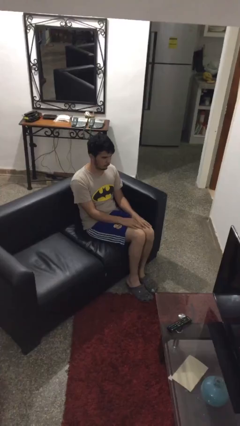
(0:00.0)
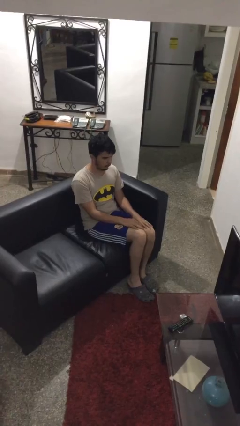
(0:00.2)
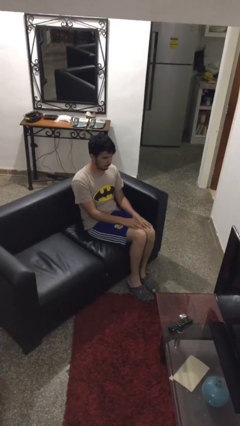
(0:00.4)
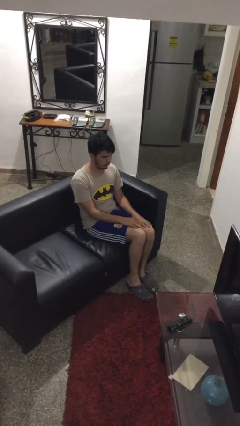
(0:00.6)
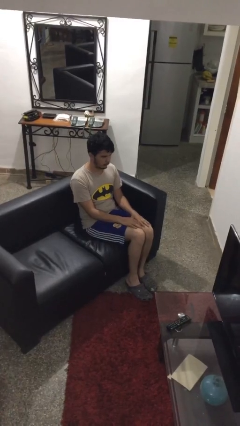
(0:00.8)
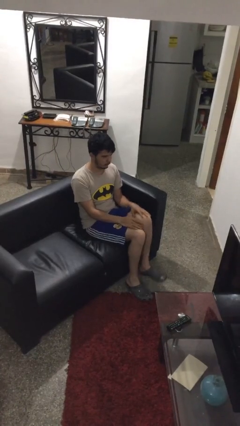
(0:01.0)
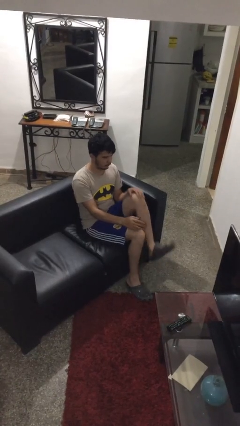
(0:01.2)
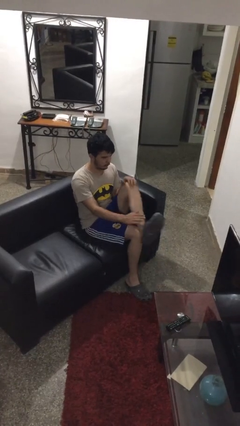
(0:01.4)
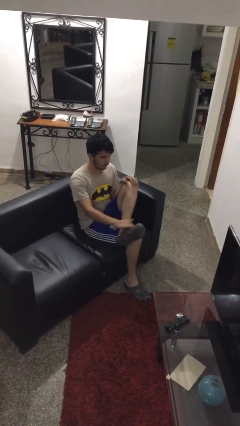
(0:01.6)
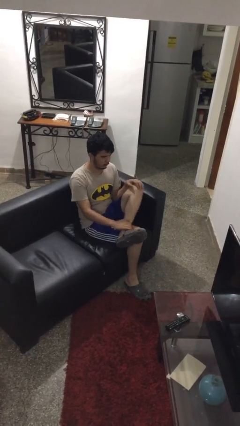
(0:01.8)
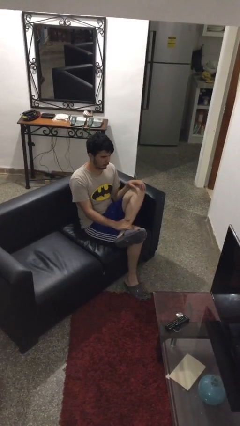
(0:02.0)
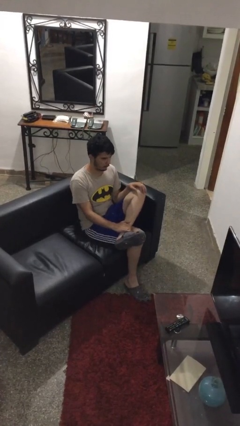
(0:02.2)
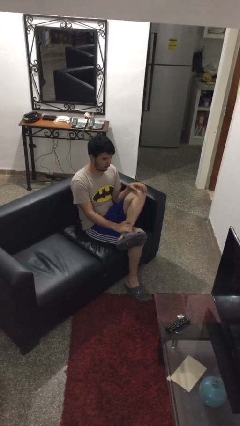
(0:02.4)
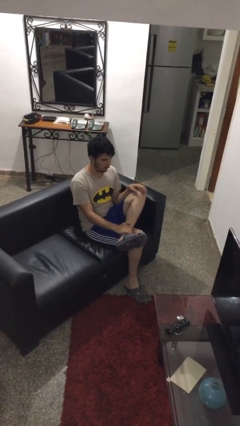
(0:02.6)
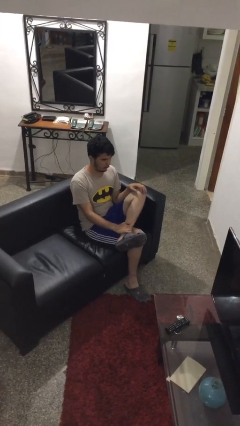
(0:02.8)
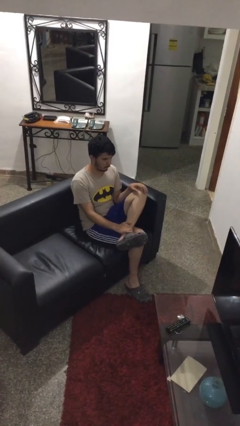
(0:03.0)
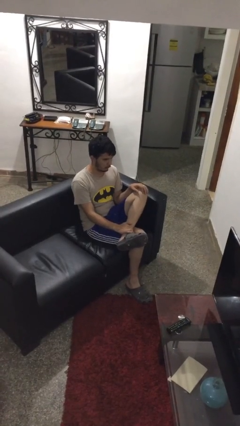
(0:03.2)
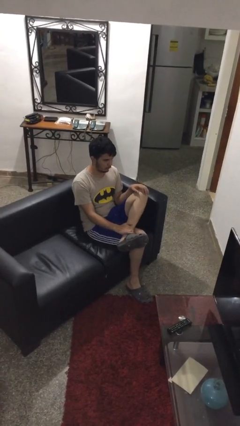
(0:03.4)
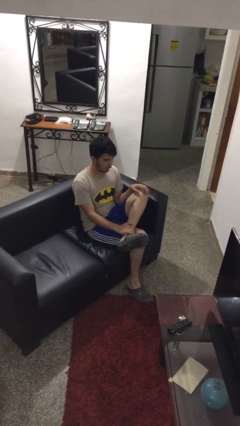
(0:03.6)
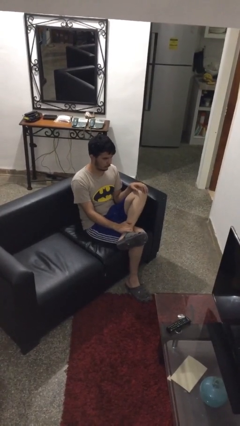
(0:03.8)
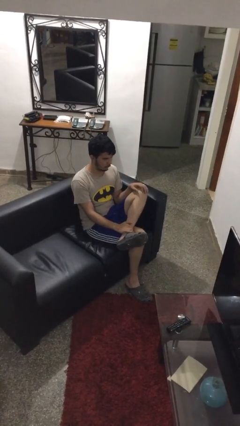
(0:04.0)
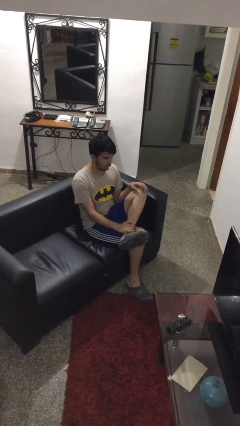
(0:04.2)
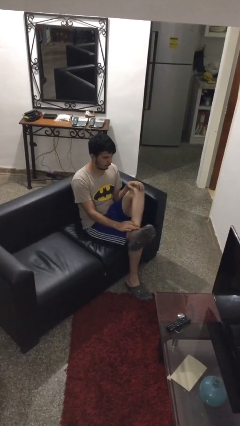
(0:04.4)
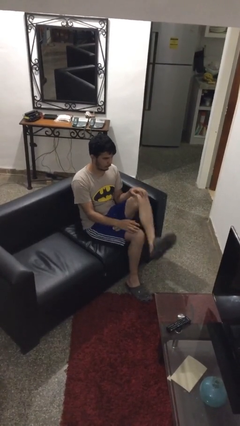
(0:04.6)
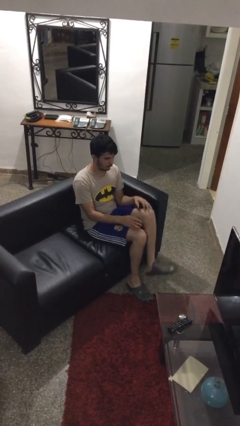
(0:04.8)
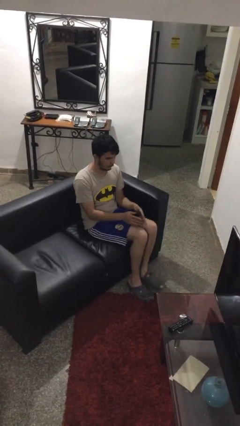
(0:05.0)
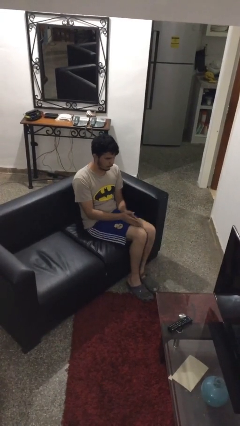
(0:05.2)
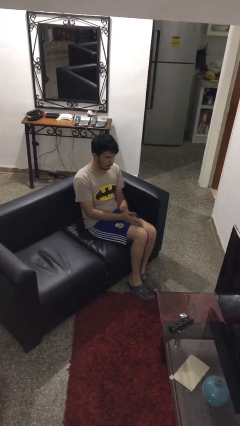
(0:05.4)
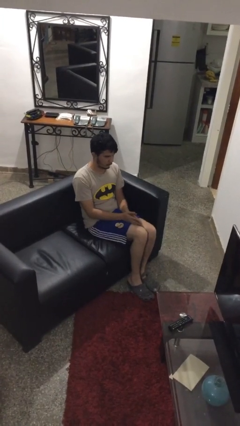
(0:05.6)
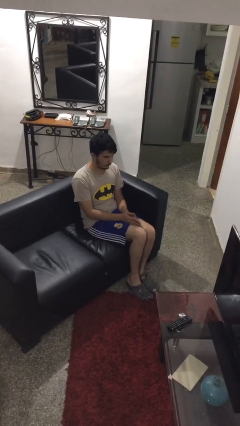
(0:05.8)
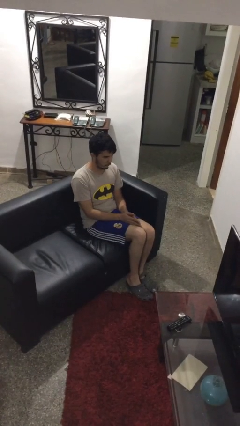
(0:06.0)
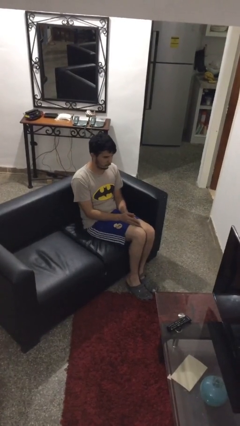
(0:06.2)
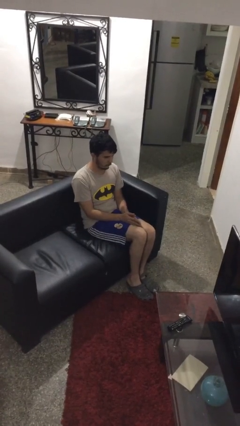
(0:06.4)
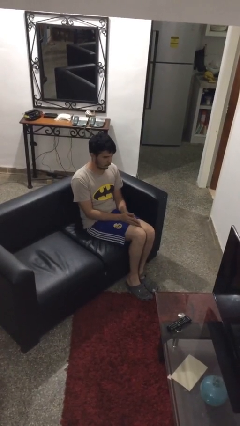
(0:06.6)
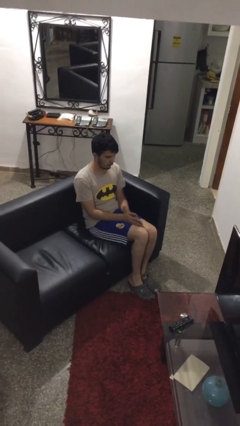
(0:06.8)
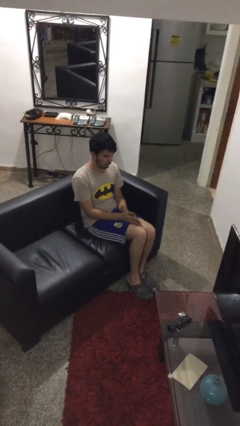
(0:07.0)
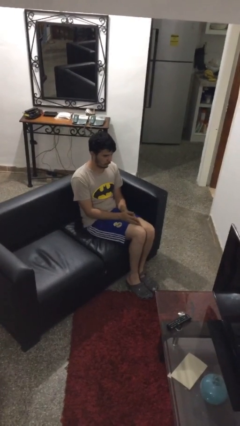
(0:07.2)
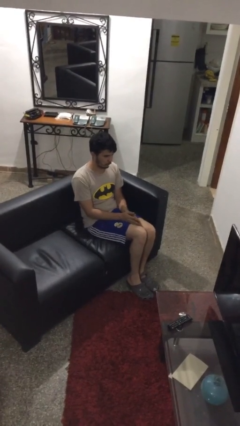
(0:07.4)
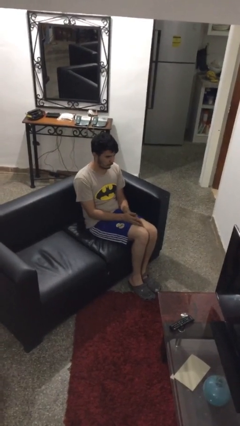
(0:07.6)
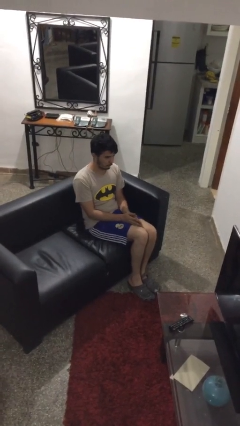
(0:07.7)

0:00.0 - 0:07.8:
person crosses legs

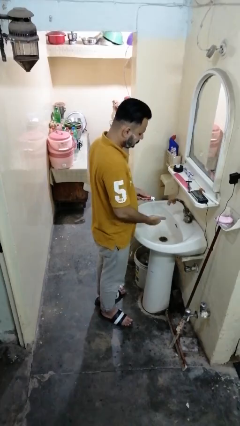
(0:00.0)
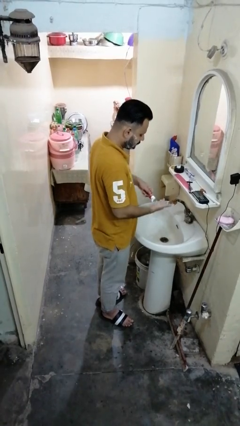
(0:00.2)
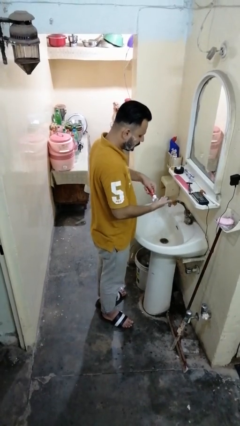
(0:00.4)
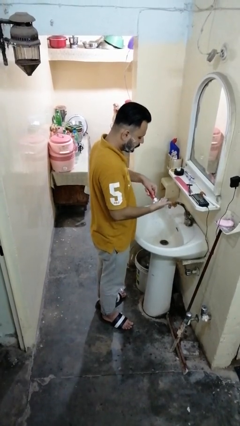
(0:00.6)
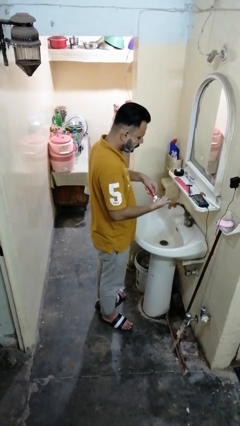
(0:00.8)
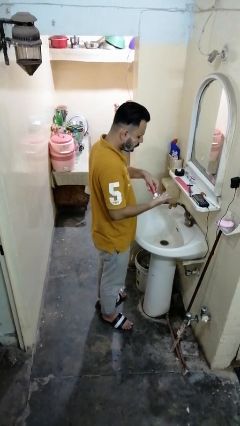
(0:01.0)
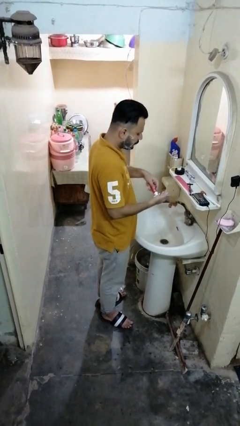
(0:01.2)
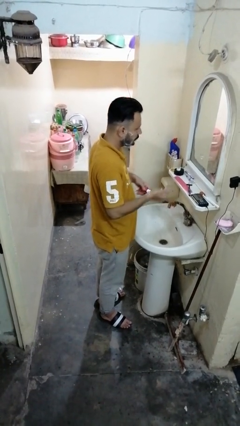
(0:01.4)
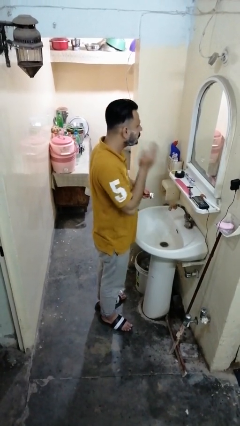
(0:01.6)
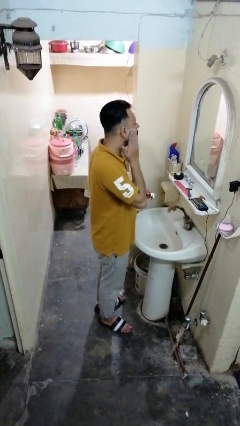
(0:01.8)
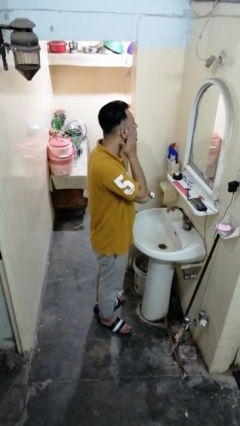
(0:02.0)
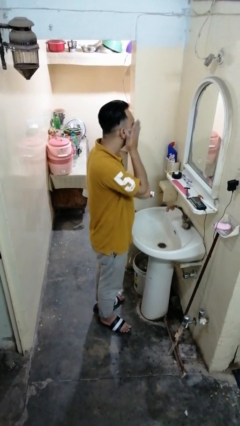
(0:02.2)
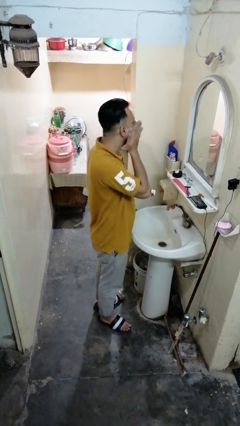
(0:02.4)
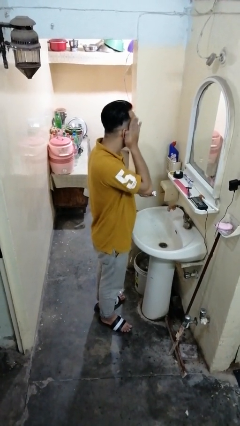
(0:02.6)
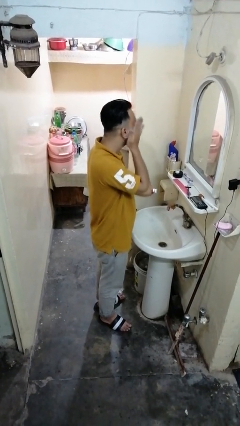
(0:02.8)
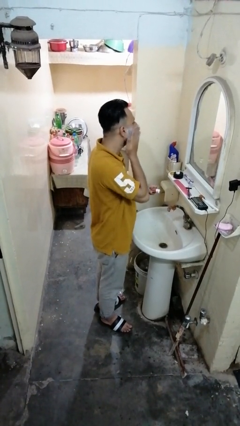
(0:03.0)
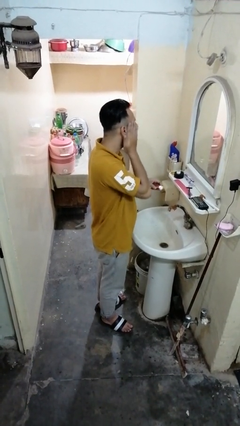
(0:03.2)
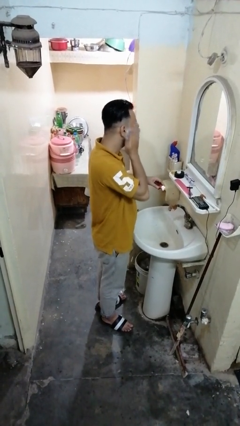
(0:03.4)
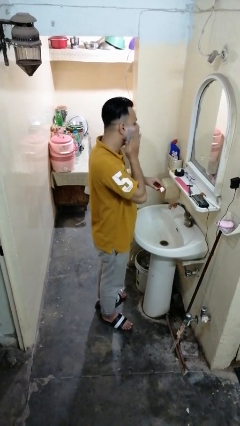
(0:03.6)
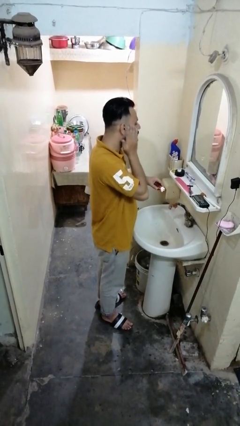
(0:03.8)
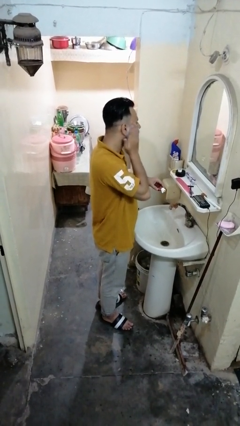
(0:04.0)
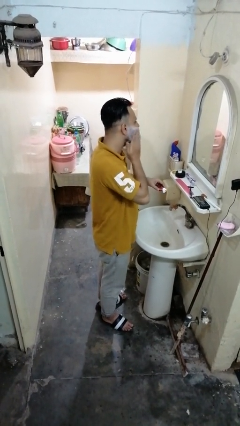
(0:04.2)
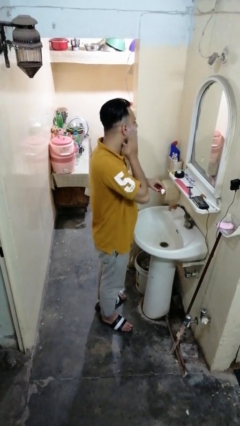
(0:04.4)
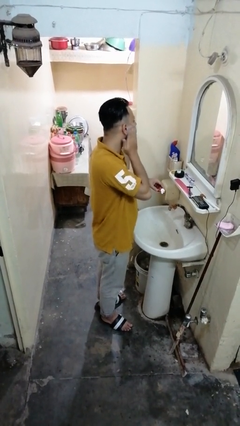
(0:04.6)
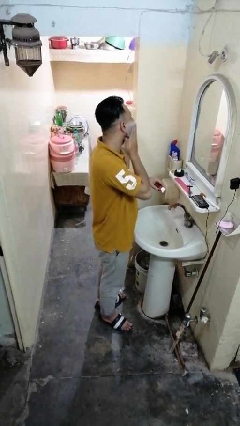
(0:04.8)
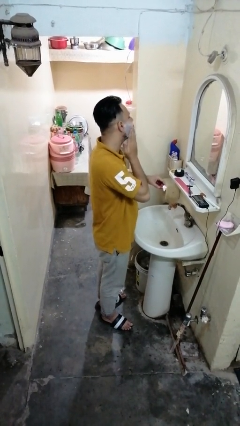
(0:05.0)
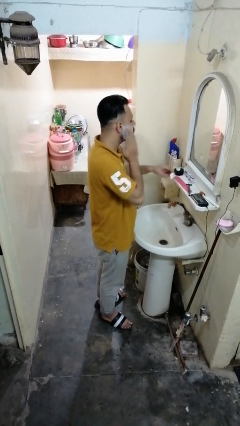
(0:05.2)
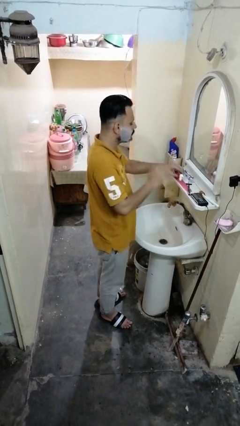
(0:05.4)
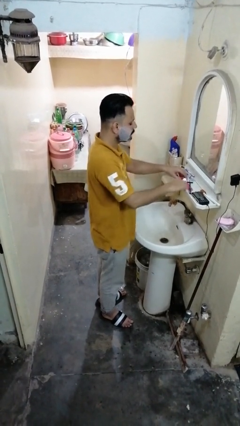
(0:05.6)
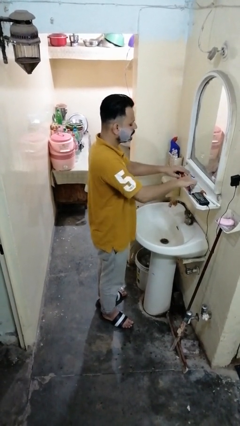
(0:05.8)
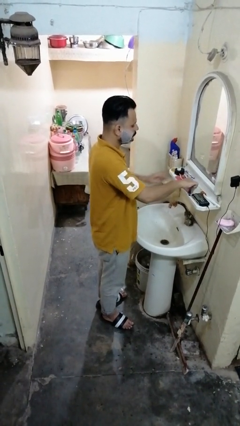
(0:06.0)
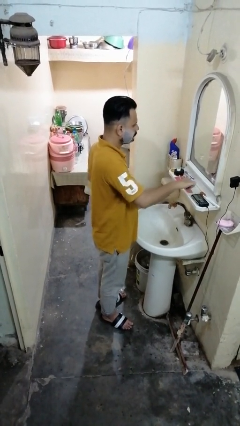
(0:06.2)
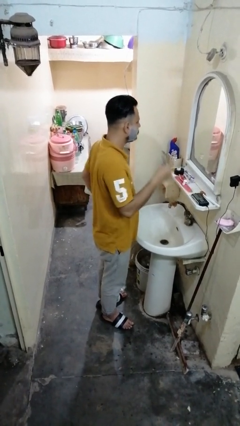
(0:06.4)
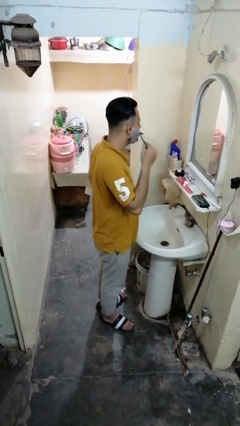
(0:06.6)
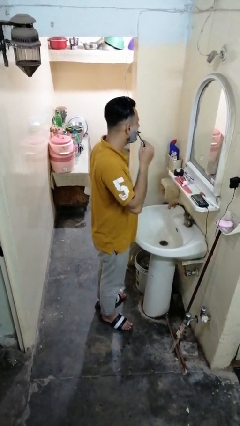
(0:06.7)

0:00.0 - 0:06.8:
person applies shaving cream

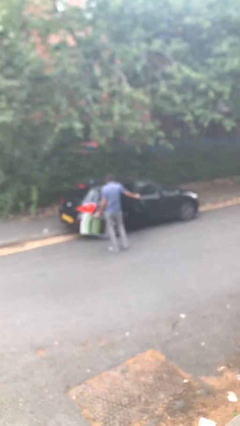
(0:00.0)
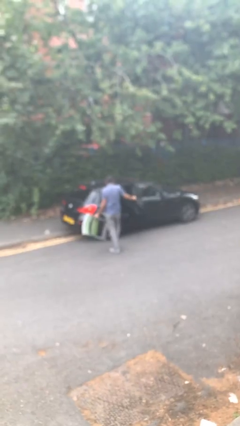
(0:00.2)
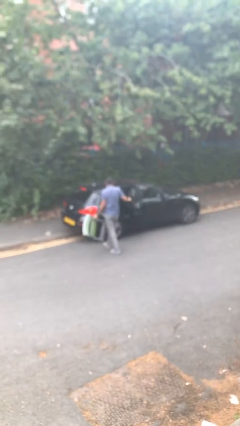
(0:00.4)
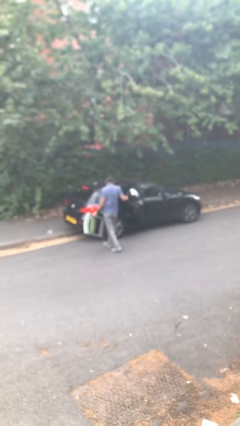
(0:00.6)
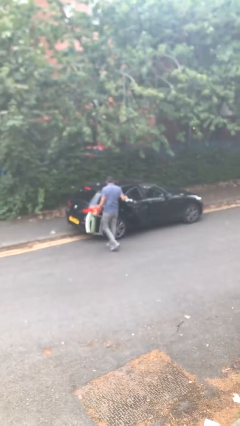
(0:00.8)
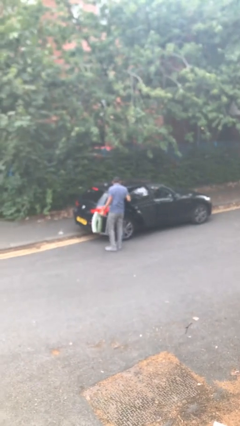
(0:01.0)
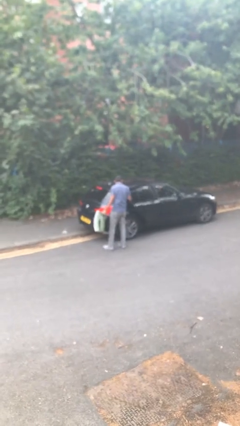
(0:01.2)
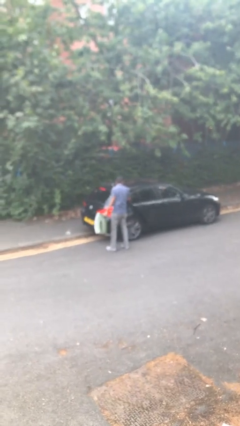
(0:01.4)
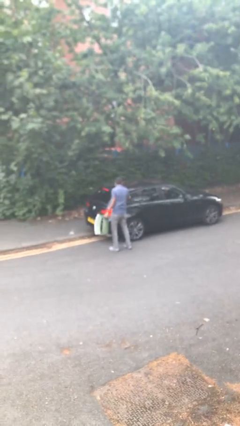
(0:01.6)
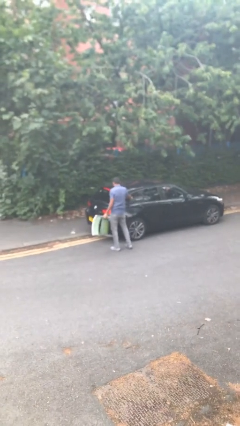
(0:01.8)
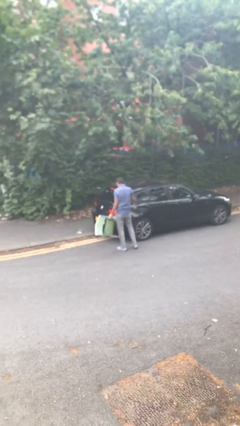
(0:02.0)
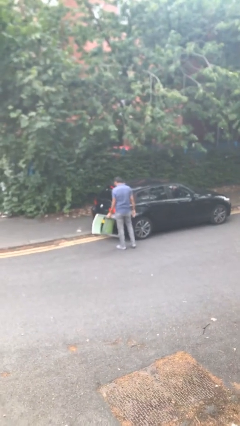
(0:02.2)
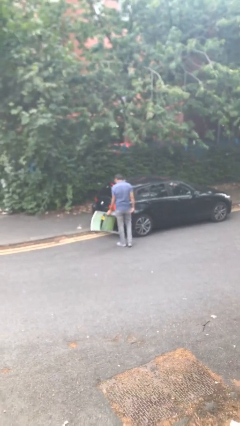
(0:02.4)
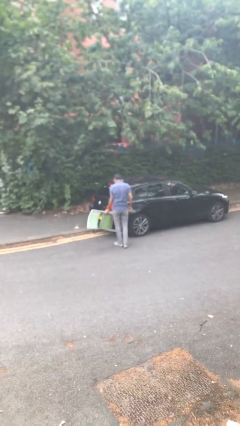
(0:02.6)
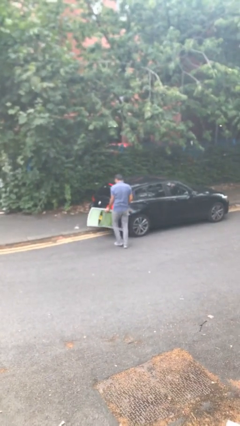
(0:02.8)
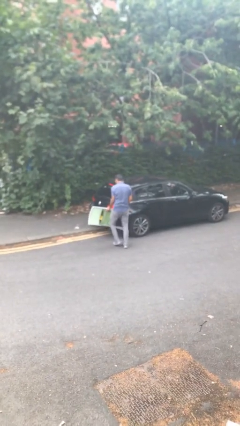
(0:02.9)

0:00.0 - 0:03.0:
person closes car door

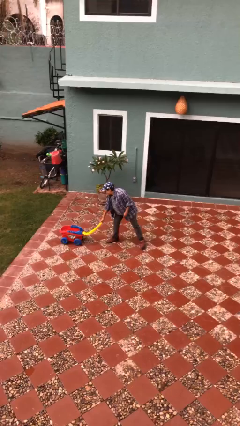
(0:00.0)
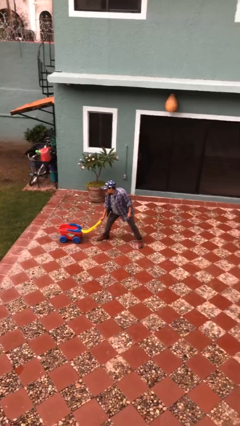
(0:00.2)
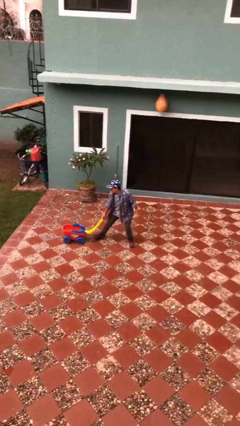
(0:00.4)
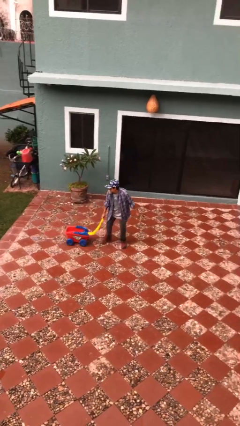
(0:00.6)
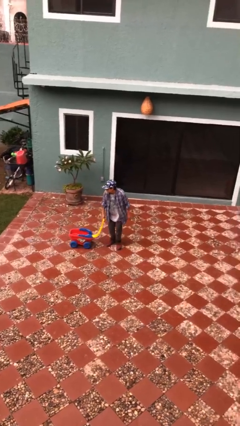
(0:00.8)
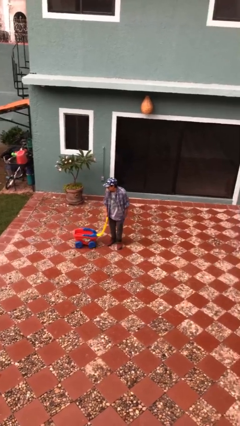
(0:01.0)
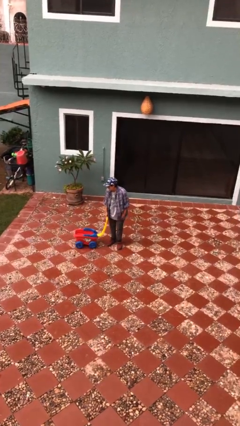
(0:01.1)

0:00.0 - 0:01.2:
person pulls wheeled cart
